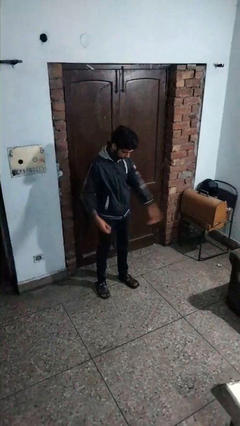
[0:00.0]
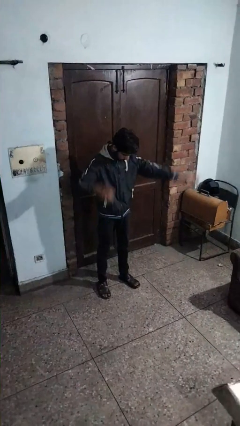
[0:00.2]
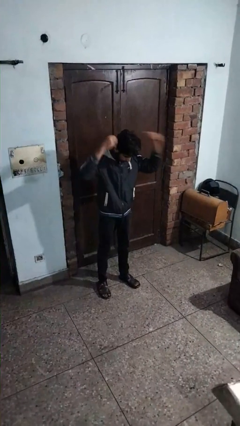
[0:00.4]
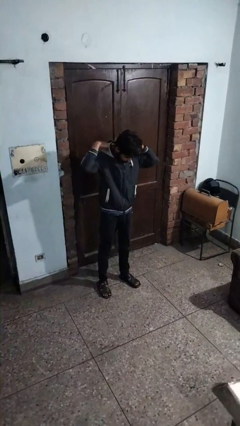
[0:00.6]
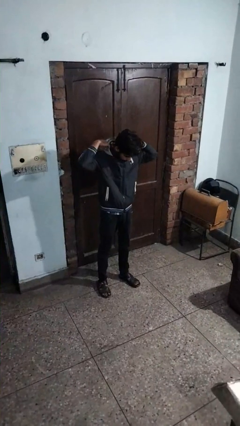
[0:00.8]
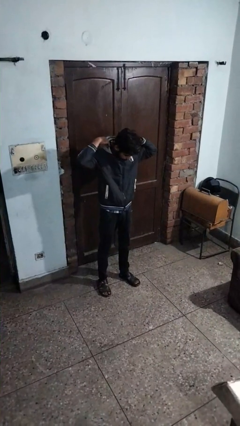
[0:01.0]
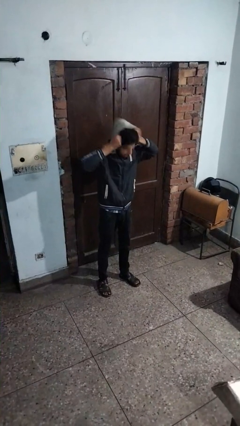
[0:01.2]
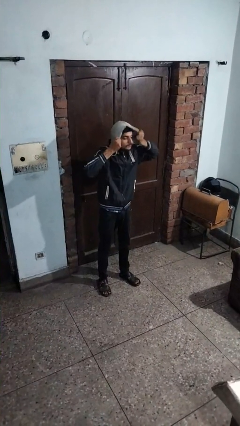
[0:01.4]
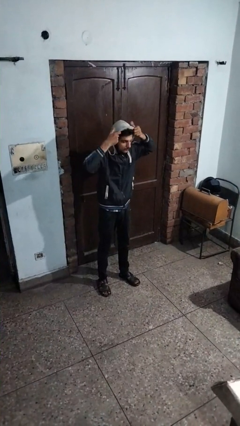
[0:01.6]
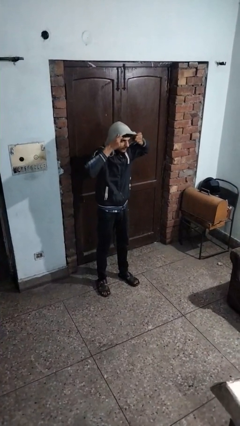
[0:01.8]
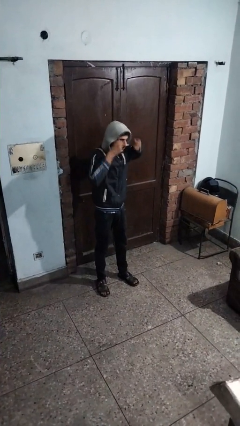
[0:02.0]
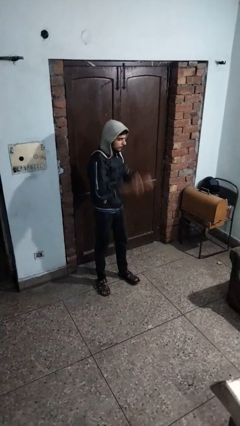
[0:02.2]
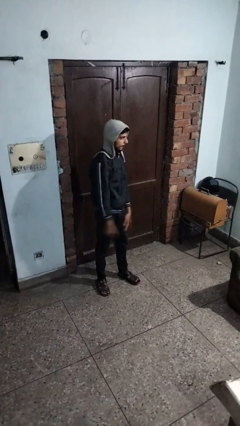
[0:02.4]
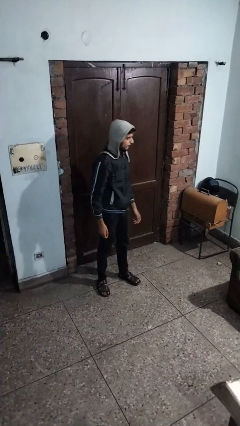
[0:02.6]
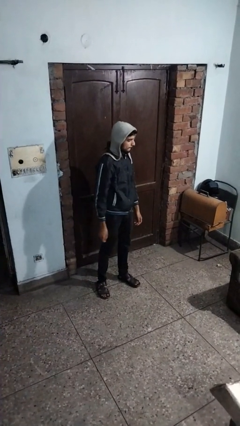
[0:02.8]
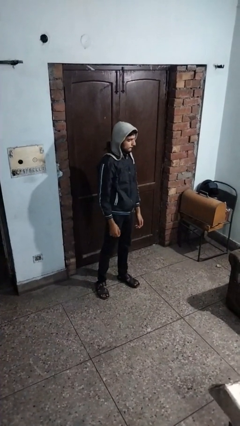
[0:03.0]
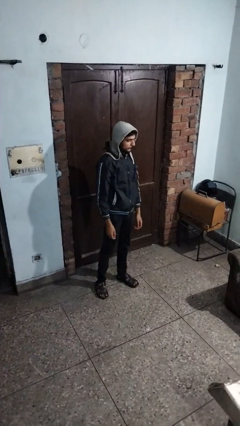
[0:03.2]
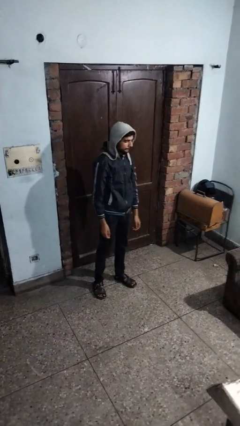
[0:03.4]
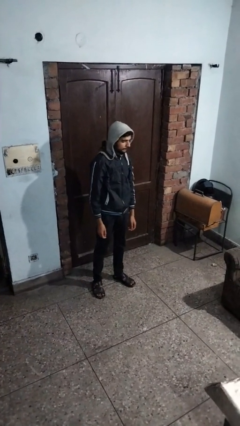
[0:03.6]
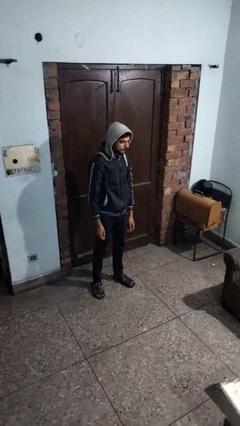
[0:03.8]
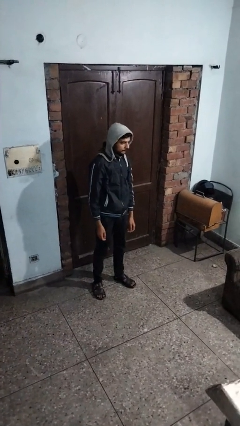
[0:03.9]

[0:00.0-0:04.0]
person puts on hoodie

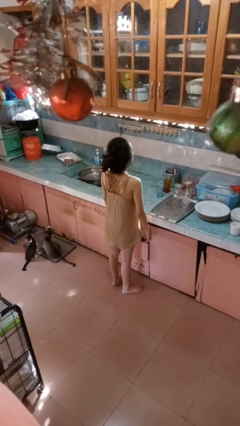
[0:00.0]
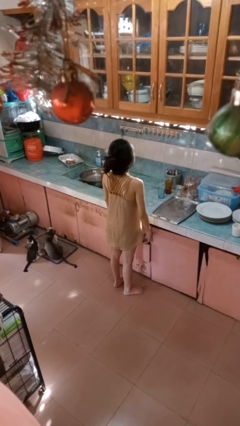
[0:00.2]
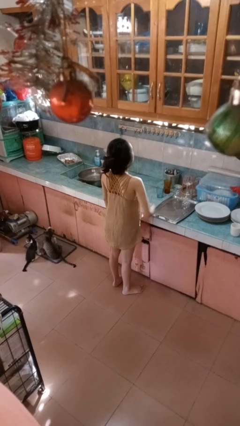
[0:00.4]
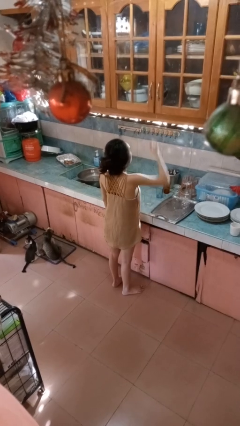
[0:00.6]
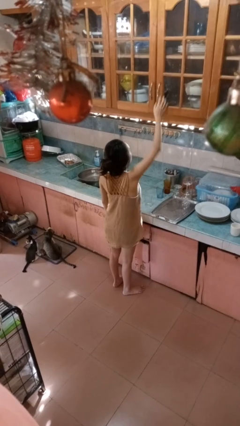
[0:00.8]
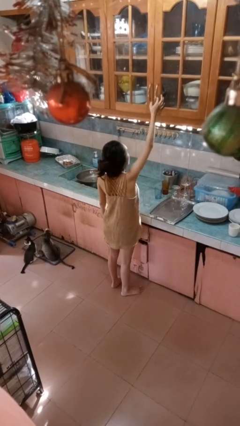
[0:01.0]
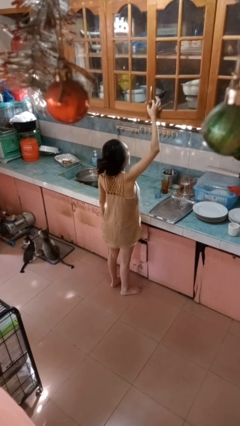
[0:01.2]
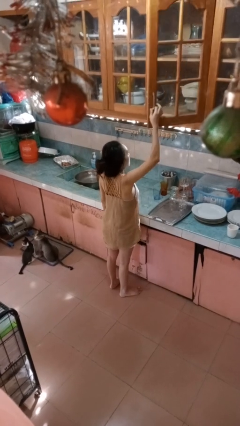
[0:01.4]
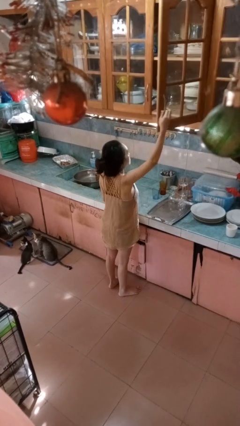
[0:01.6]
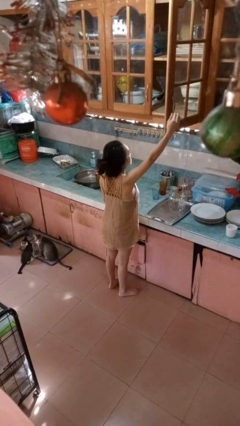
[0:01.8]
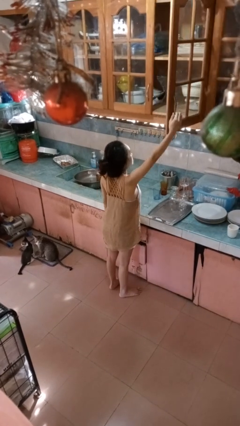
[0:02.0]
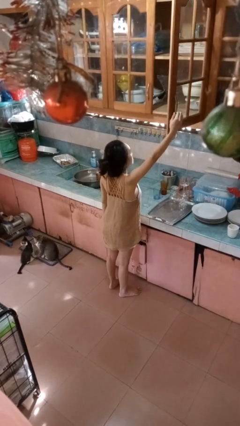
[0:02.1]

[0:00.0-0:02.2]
person opens cabinet

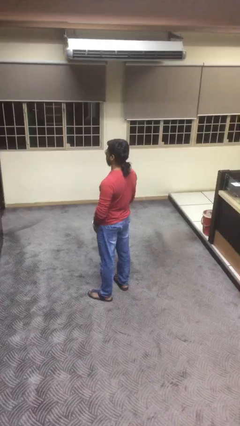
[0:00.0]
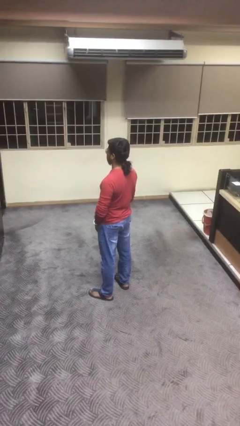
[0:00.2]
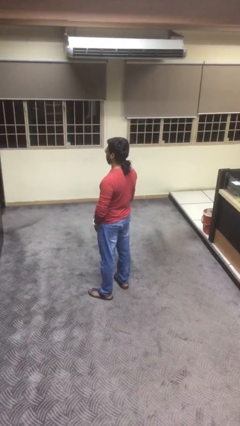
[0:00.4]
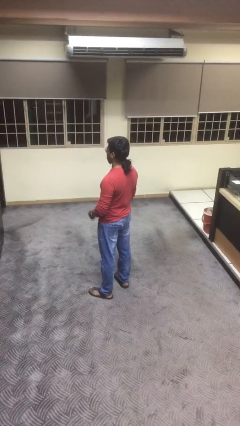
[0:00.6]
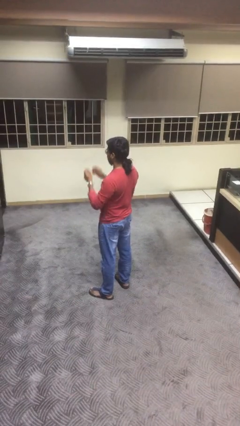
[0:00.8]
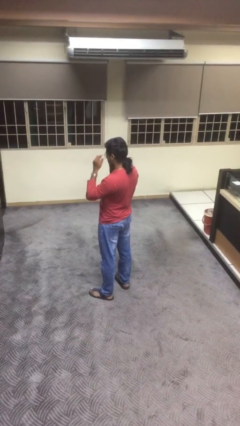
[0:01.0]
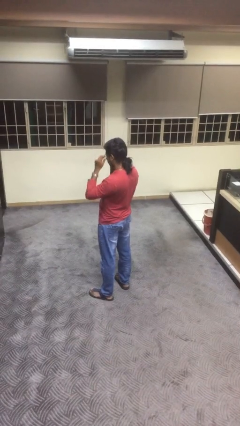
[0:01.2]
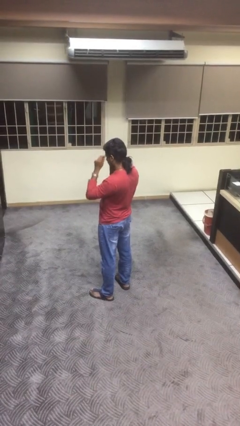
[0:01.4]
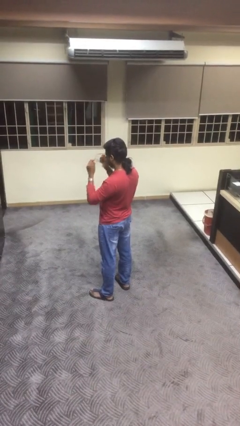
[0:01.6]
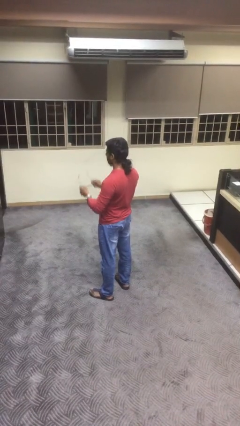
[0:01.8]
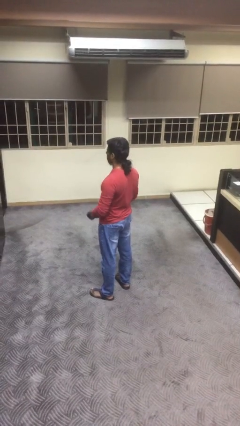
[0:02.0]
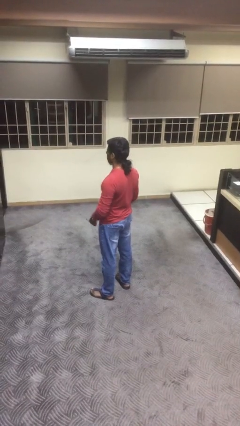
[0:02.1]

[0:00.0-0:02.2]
person takes off glasses

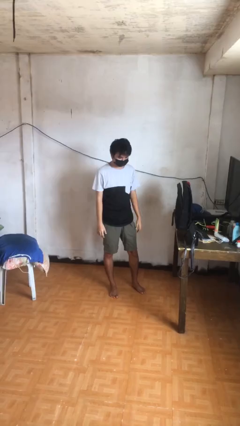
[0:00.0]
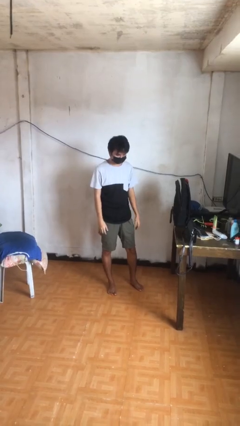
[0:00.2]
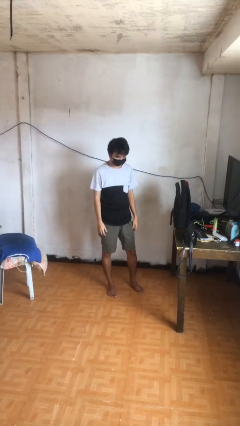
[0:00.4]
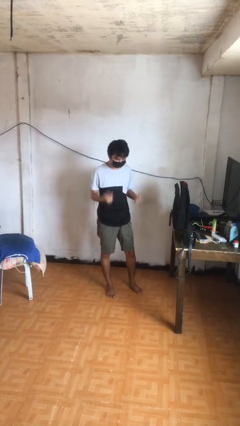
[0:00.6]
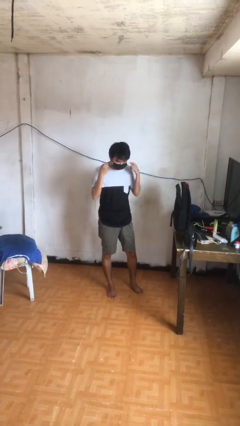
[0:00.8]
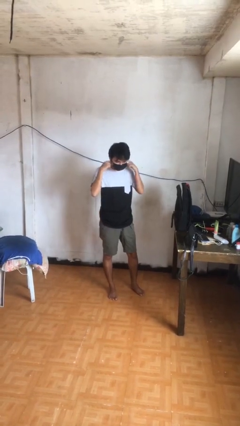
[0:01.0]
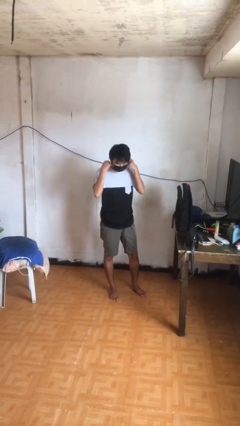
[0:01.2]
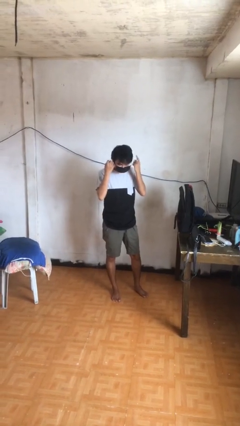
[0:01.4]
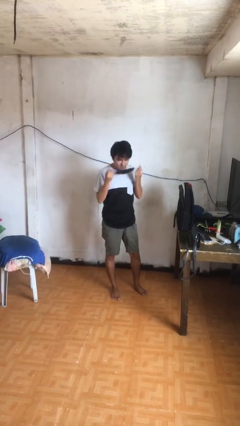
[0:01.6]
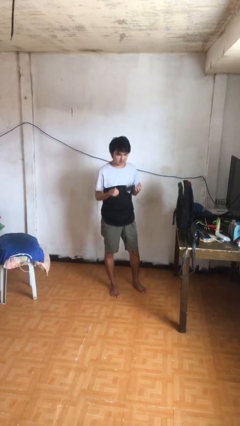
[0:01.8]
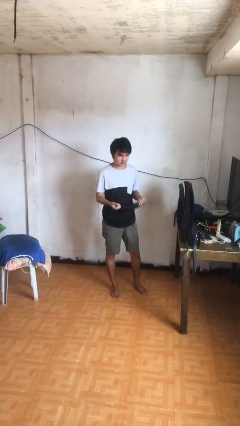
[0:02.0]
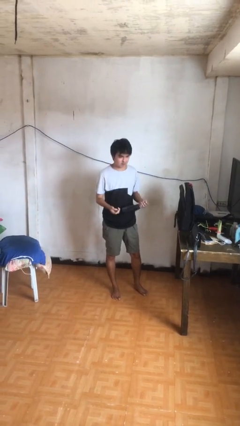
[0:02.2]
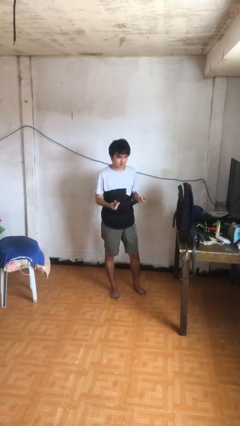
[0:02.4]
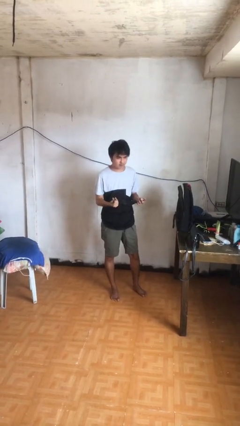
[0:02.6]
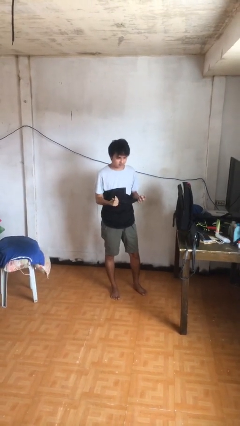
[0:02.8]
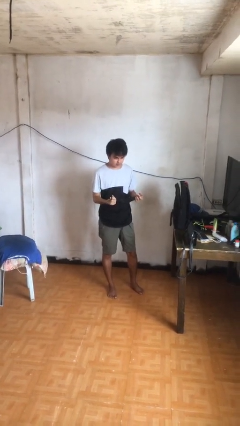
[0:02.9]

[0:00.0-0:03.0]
person takes off facemask

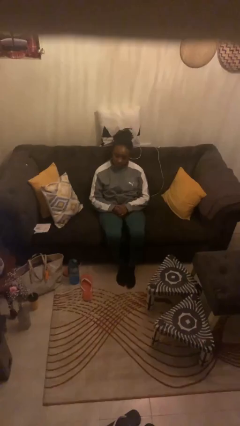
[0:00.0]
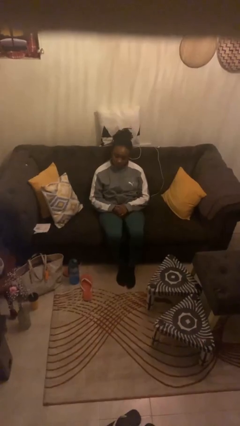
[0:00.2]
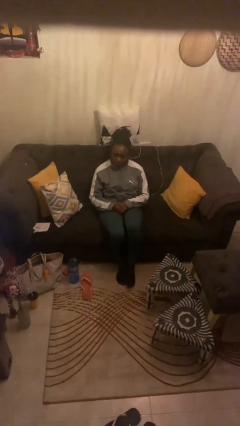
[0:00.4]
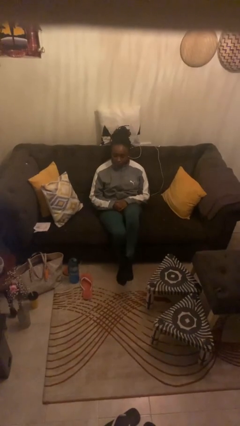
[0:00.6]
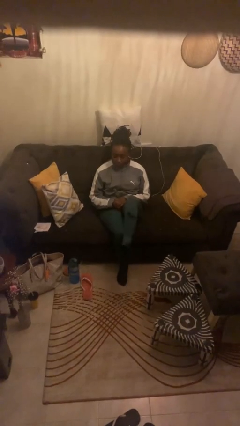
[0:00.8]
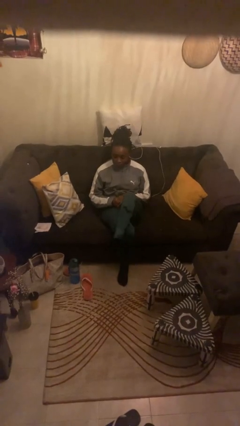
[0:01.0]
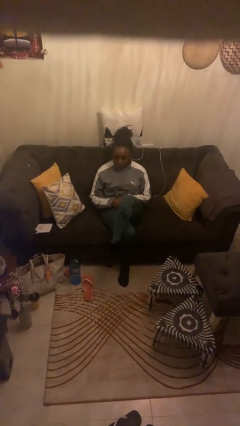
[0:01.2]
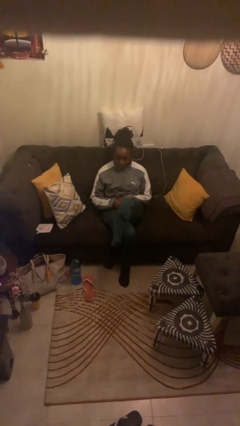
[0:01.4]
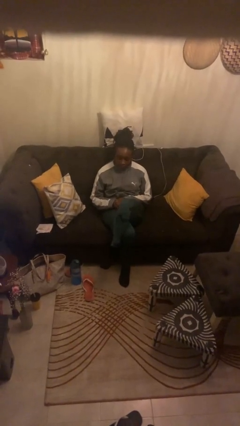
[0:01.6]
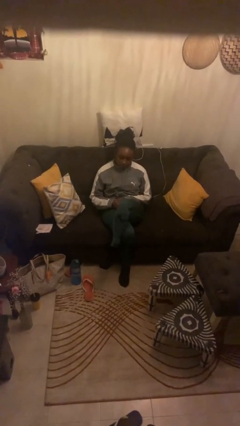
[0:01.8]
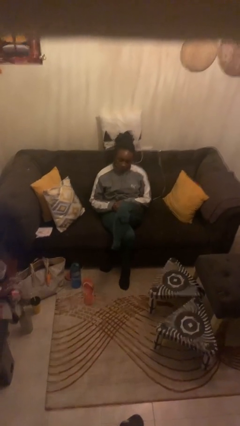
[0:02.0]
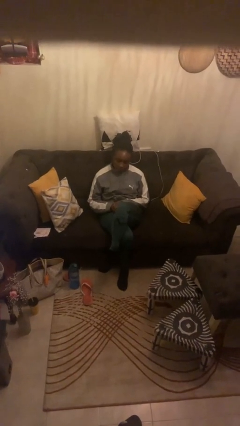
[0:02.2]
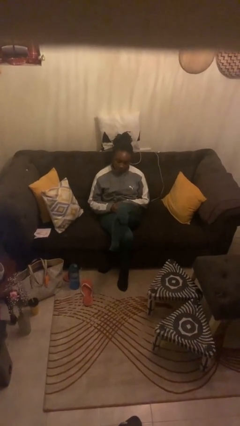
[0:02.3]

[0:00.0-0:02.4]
person crosses legs

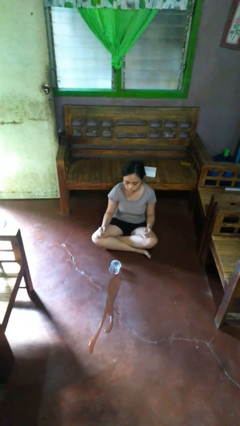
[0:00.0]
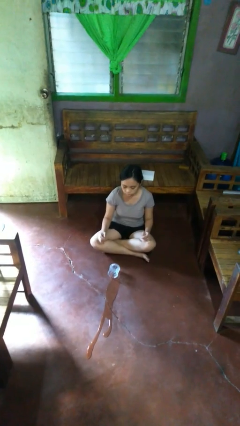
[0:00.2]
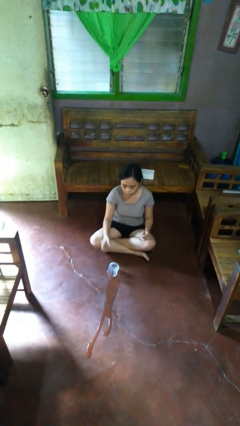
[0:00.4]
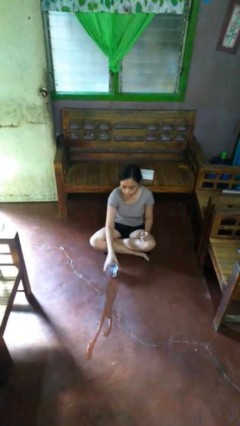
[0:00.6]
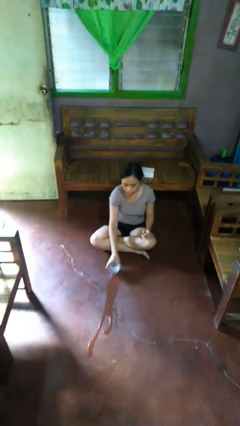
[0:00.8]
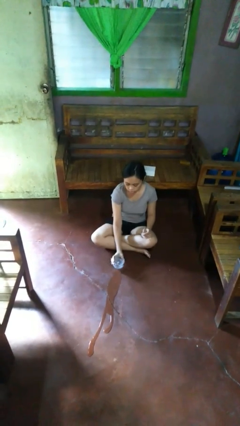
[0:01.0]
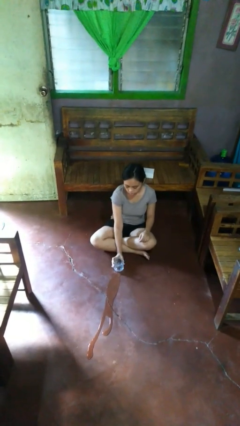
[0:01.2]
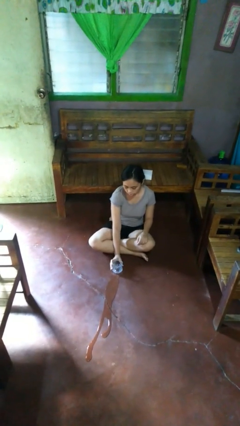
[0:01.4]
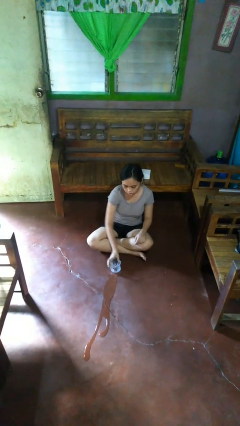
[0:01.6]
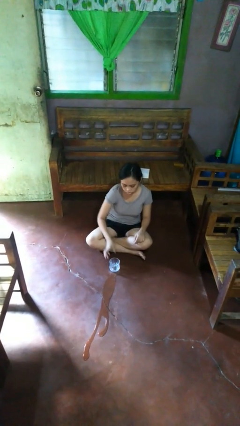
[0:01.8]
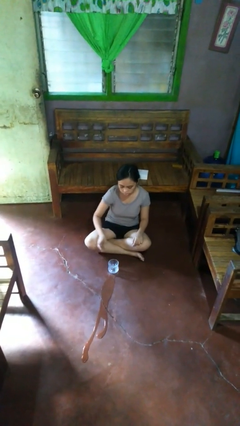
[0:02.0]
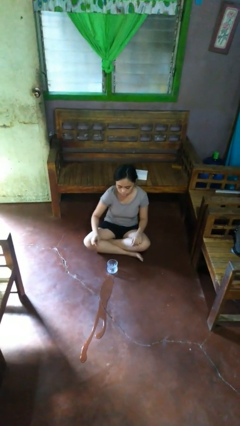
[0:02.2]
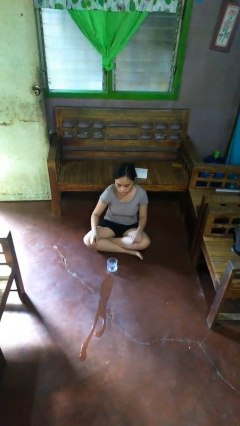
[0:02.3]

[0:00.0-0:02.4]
person sets upright glass

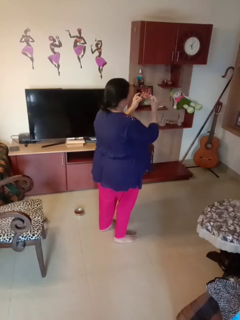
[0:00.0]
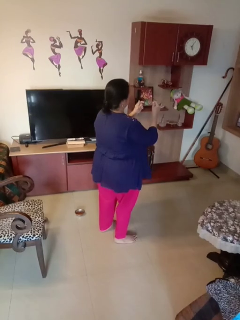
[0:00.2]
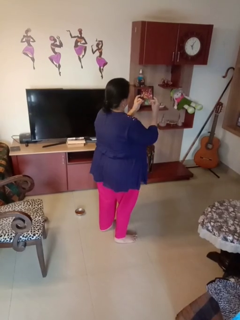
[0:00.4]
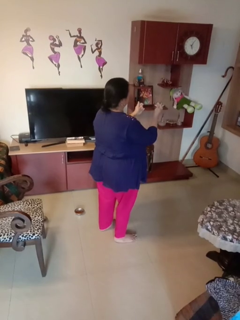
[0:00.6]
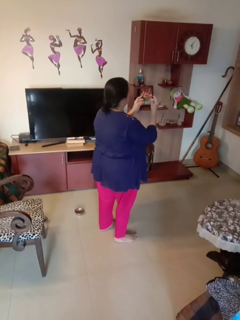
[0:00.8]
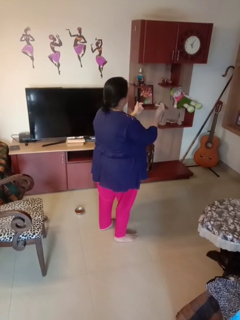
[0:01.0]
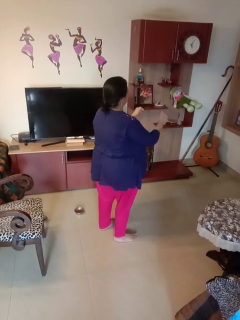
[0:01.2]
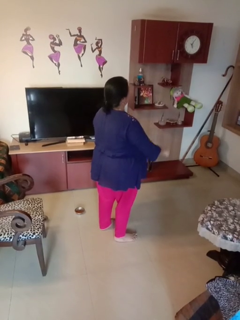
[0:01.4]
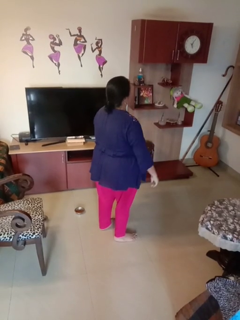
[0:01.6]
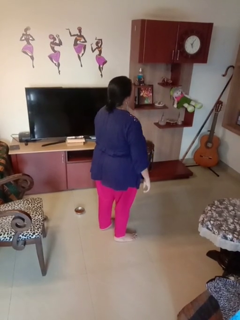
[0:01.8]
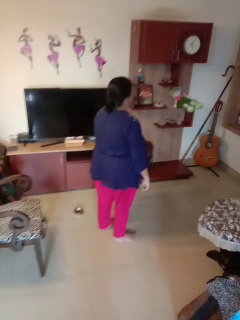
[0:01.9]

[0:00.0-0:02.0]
person snaps fingers
